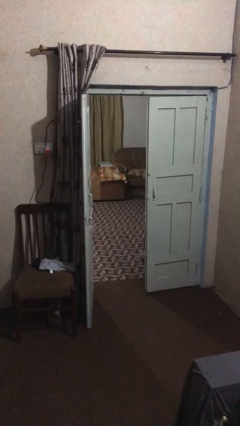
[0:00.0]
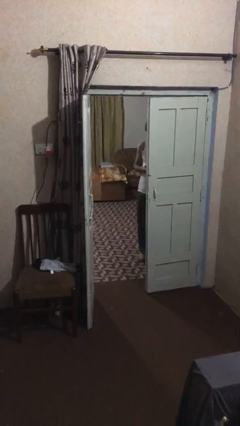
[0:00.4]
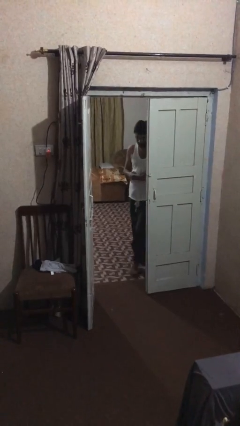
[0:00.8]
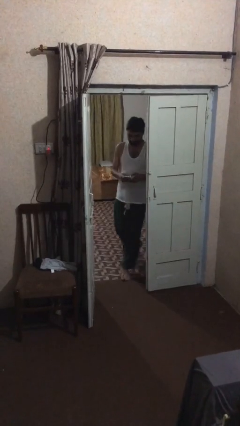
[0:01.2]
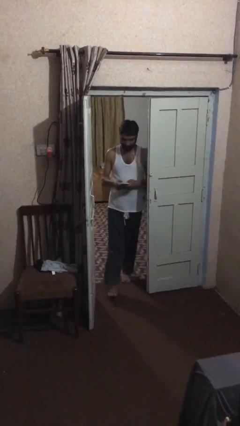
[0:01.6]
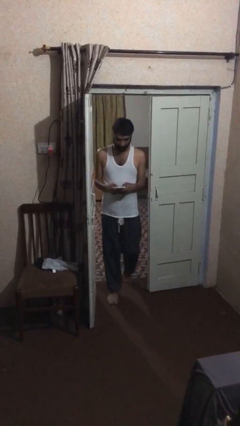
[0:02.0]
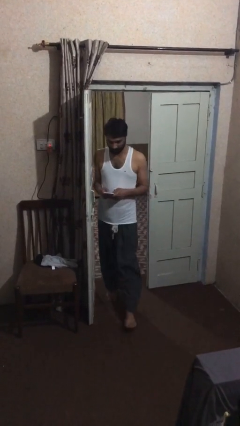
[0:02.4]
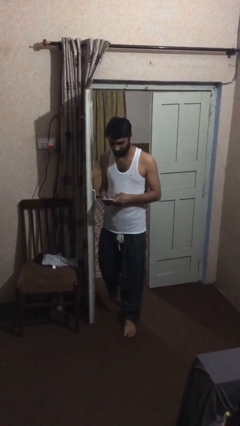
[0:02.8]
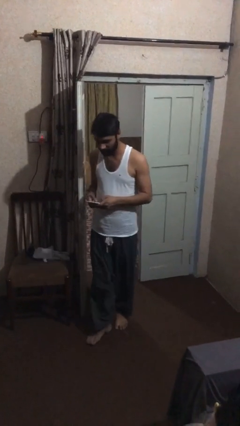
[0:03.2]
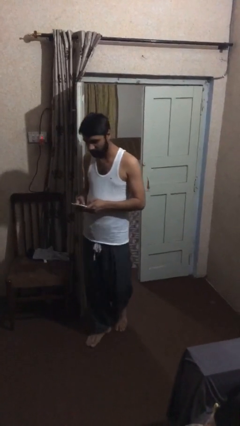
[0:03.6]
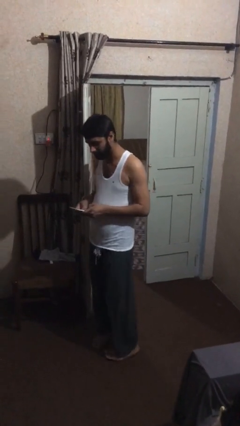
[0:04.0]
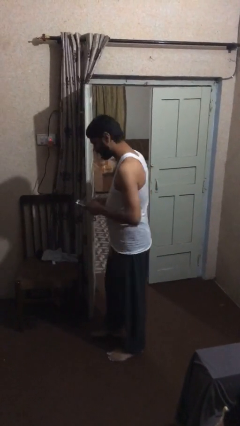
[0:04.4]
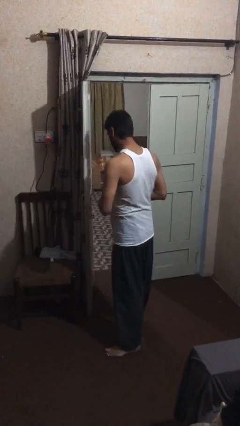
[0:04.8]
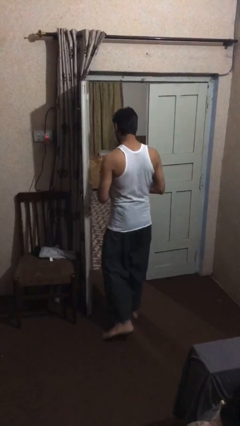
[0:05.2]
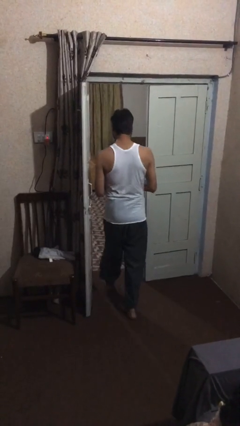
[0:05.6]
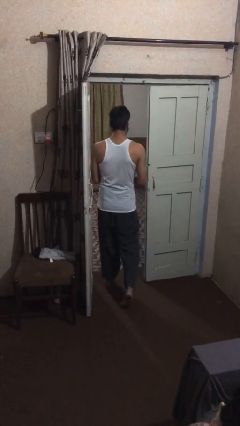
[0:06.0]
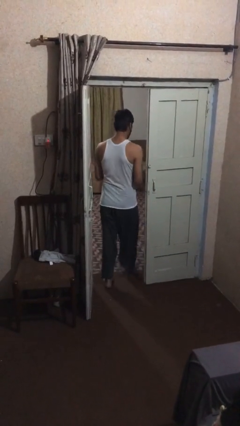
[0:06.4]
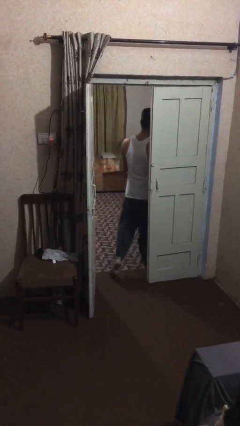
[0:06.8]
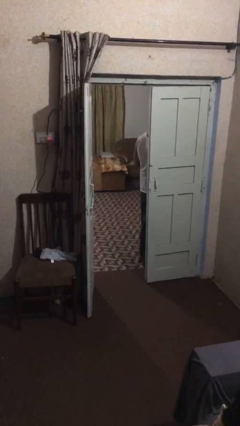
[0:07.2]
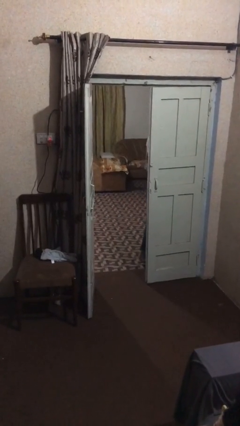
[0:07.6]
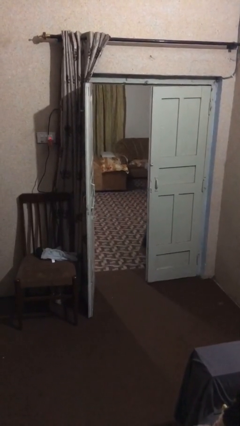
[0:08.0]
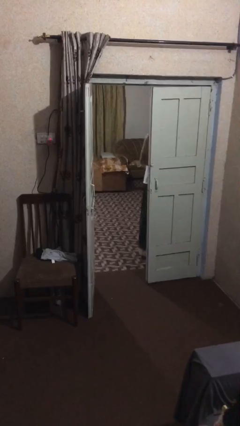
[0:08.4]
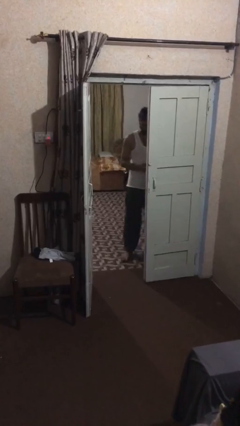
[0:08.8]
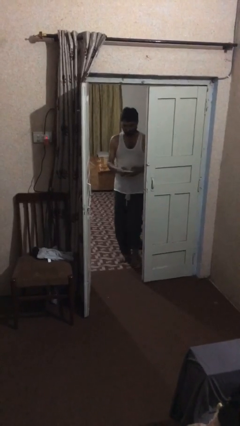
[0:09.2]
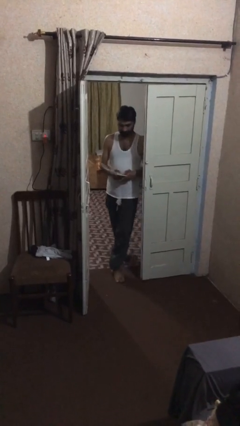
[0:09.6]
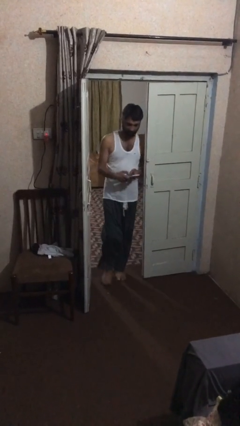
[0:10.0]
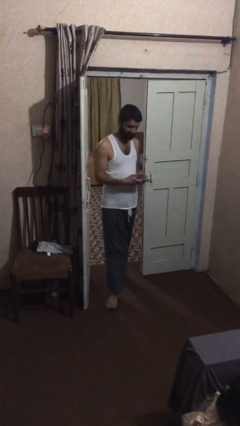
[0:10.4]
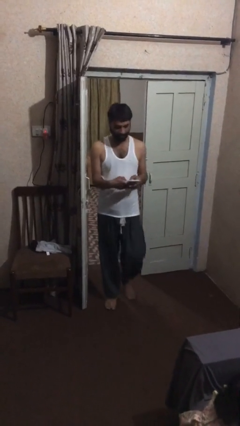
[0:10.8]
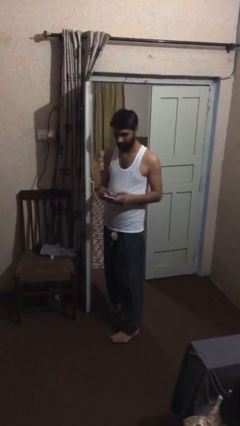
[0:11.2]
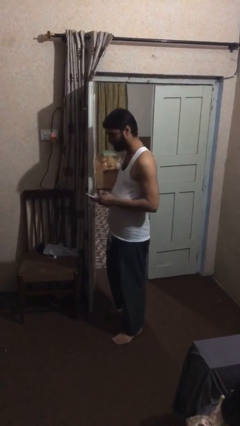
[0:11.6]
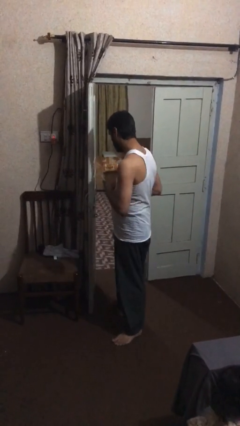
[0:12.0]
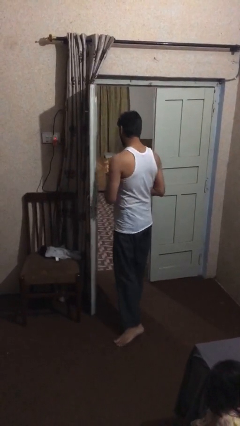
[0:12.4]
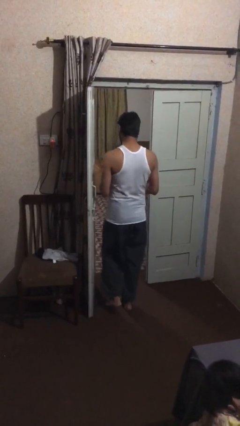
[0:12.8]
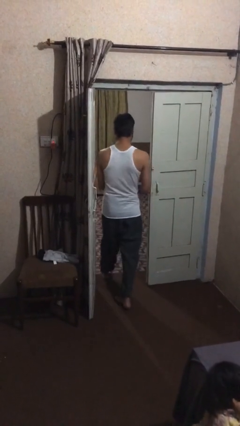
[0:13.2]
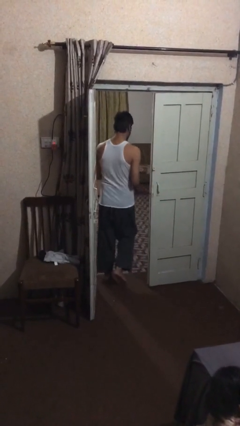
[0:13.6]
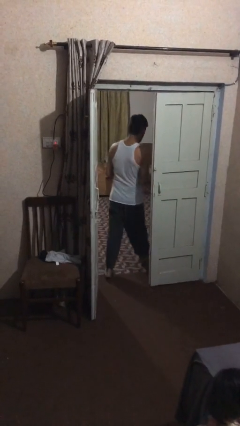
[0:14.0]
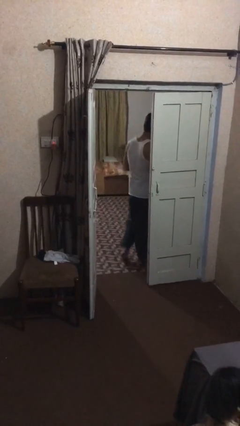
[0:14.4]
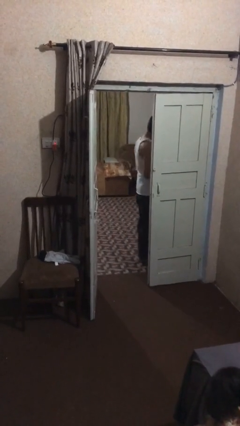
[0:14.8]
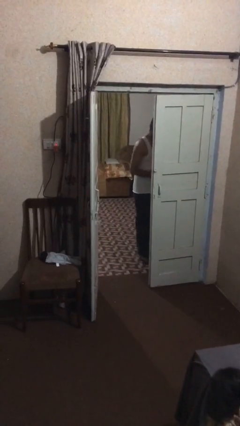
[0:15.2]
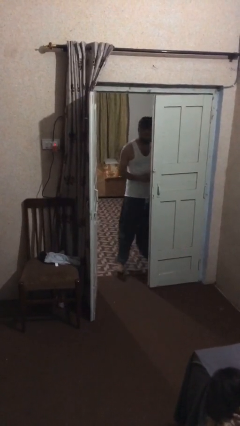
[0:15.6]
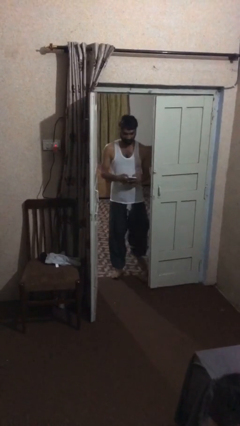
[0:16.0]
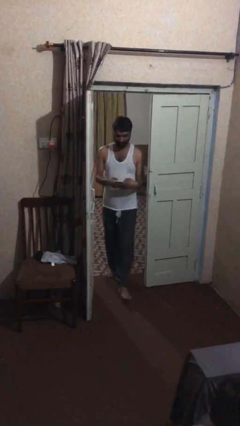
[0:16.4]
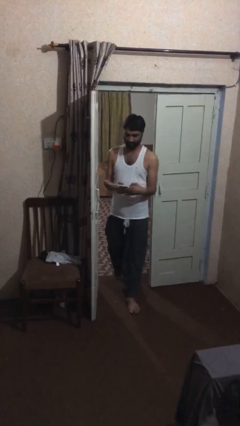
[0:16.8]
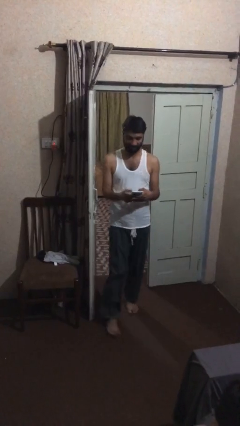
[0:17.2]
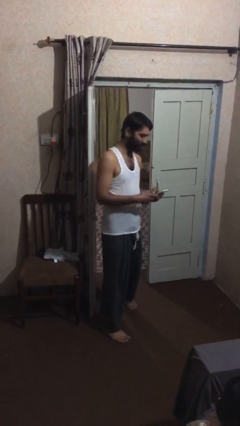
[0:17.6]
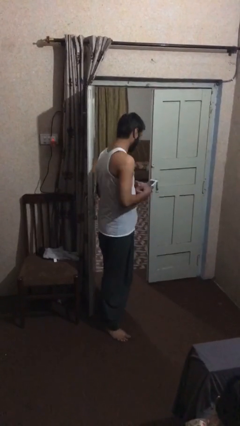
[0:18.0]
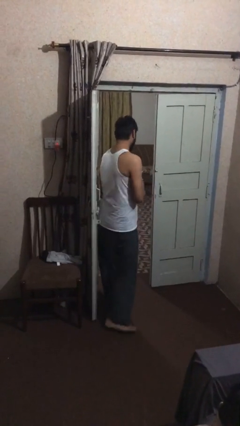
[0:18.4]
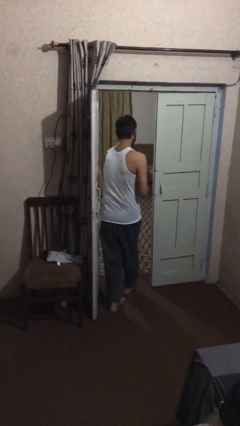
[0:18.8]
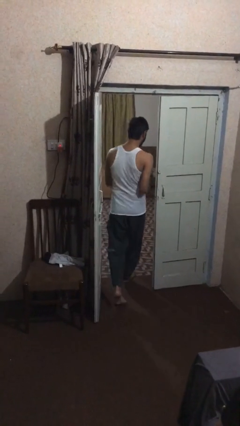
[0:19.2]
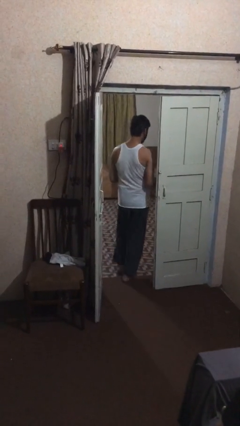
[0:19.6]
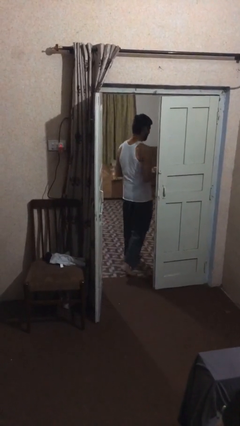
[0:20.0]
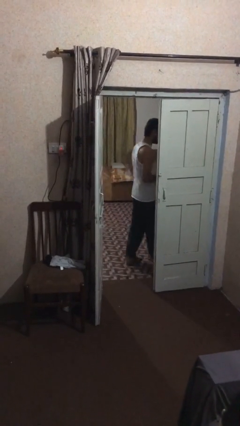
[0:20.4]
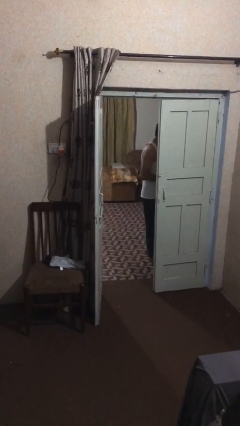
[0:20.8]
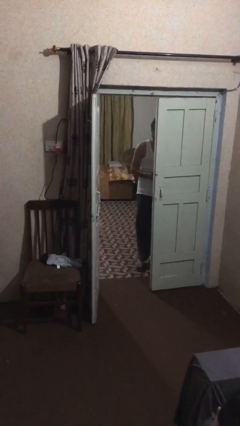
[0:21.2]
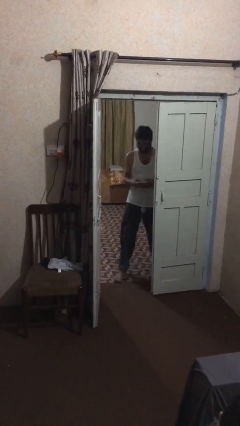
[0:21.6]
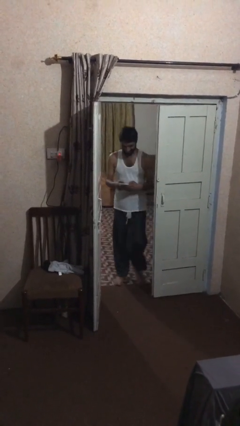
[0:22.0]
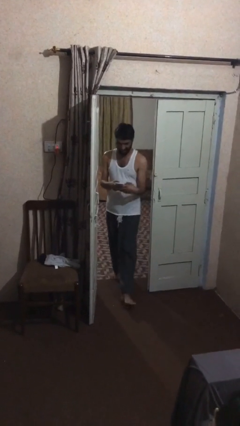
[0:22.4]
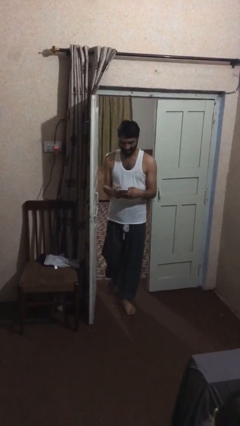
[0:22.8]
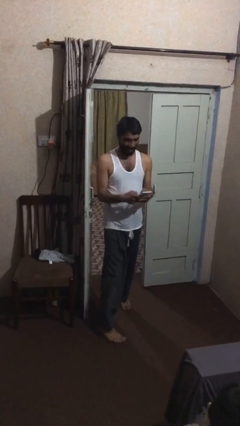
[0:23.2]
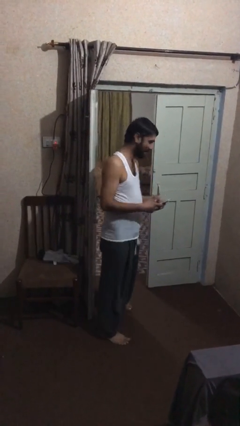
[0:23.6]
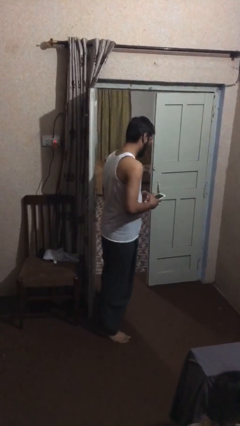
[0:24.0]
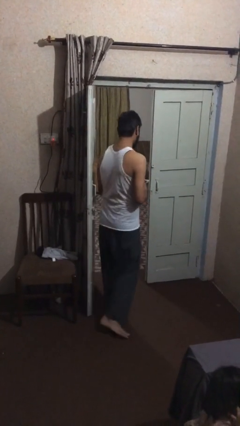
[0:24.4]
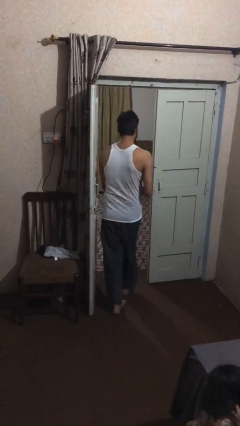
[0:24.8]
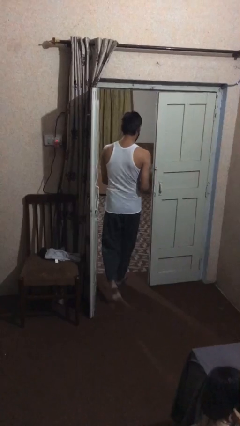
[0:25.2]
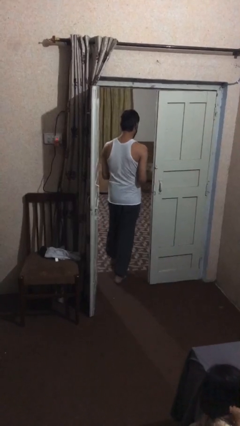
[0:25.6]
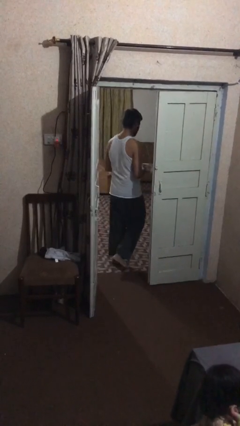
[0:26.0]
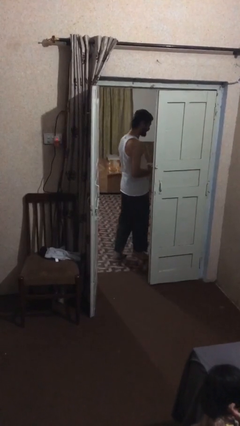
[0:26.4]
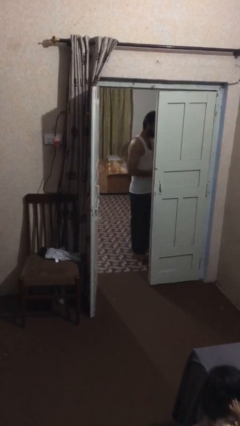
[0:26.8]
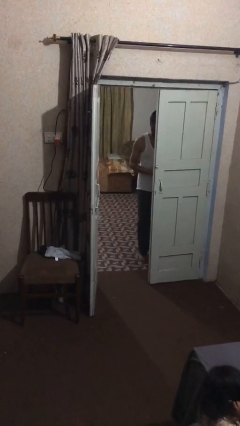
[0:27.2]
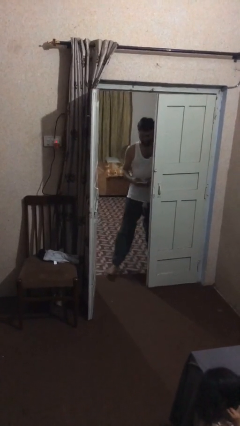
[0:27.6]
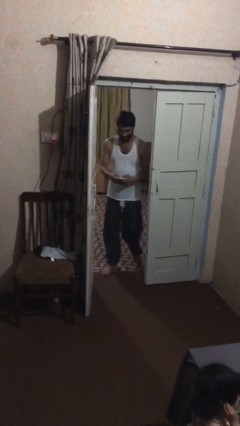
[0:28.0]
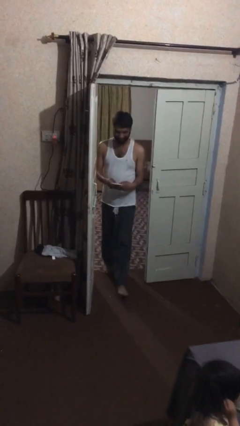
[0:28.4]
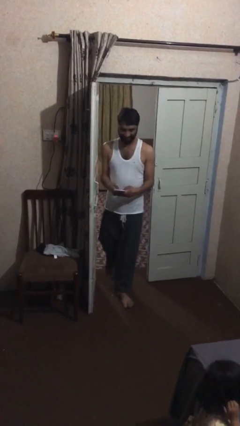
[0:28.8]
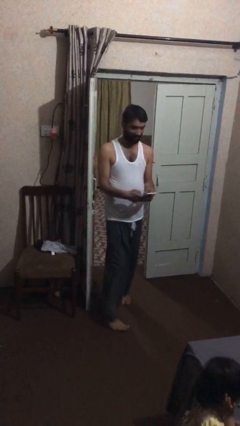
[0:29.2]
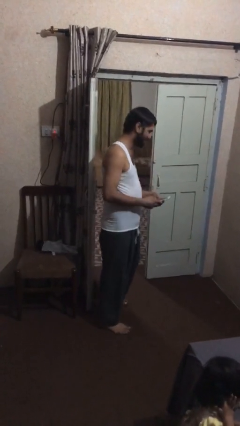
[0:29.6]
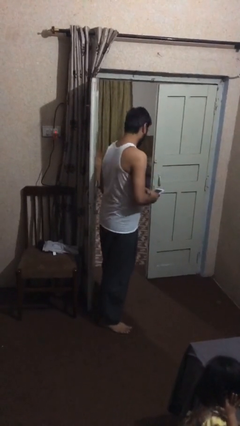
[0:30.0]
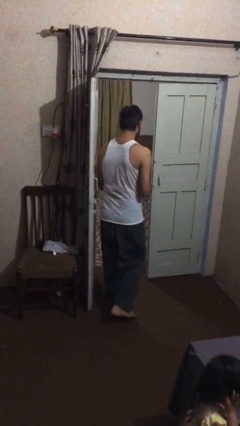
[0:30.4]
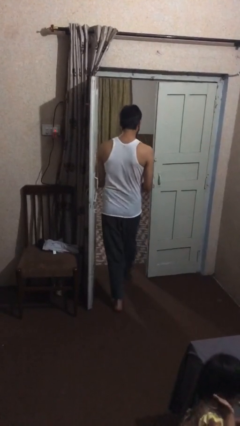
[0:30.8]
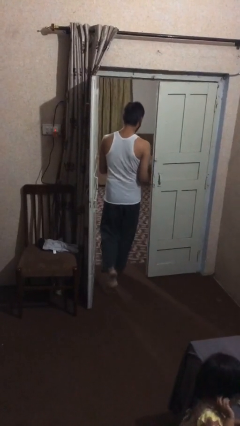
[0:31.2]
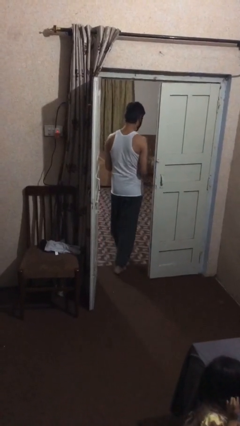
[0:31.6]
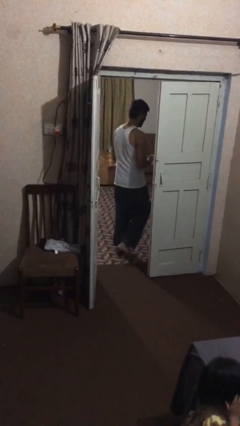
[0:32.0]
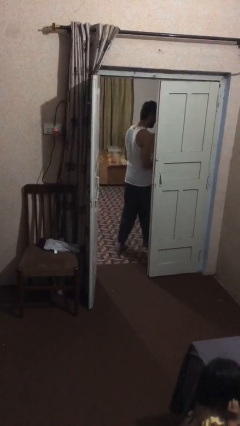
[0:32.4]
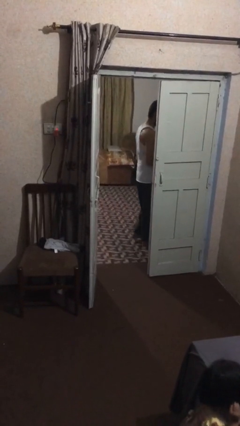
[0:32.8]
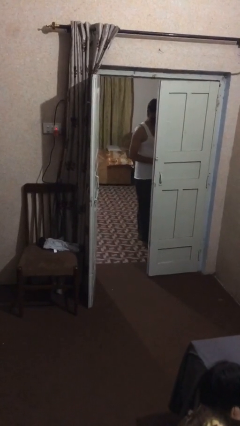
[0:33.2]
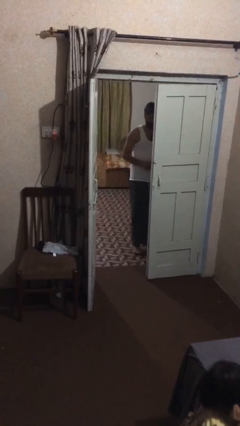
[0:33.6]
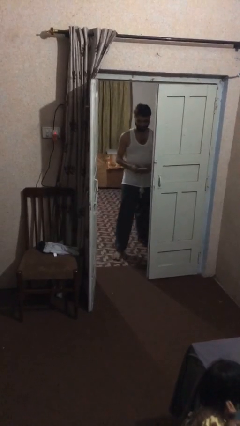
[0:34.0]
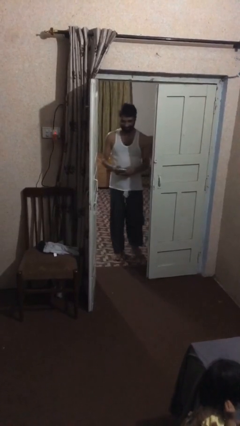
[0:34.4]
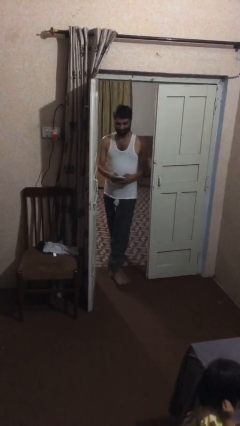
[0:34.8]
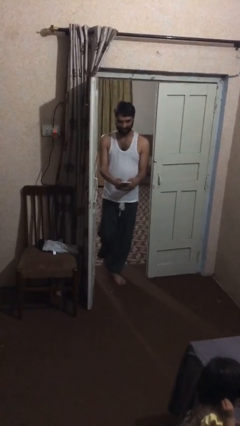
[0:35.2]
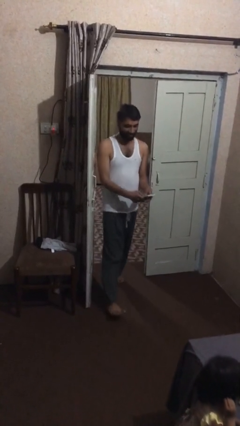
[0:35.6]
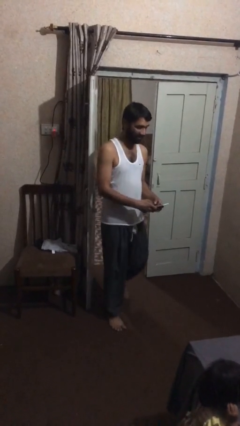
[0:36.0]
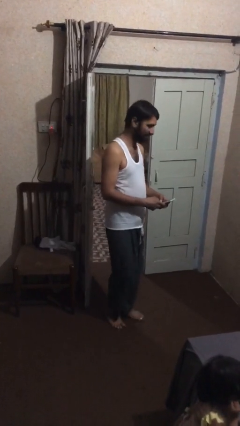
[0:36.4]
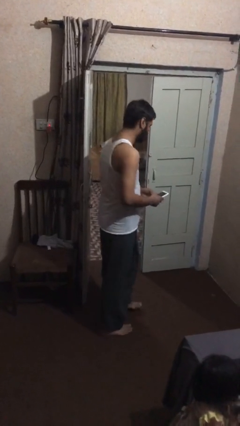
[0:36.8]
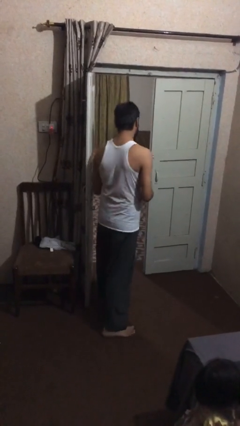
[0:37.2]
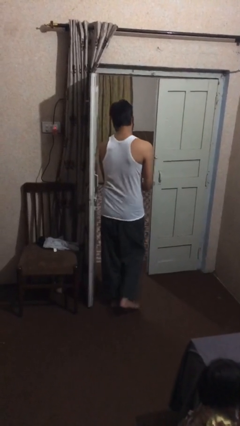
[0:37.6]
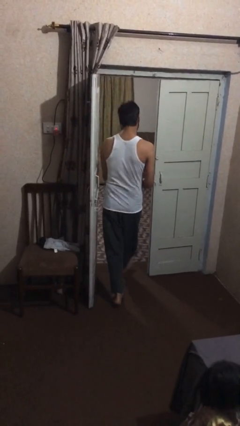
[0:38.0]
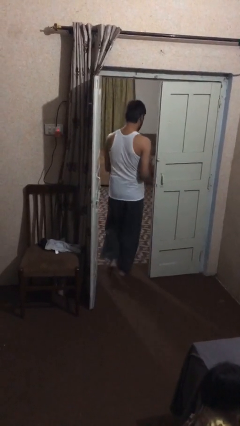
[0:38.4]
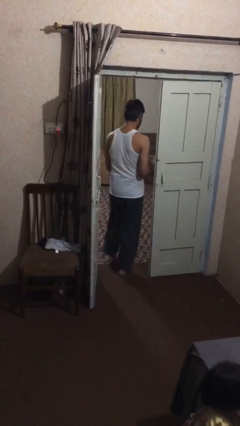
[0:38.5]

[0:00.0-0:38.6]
person texts on phone
